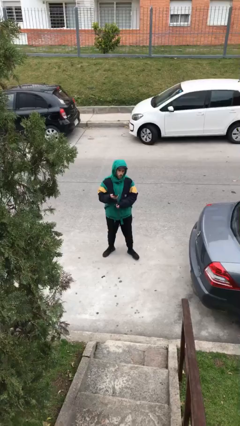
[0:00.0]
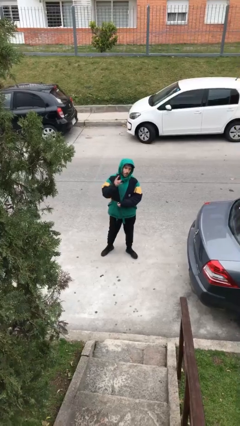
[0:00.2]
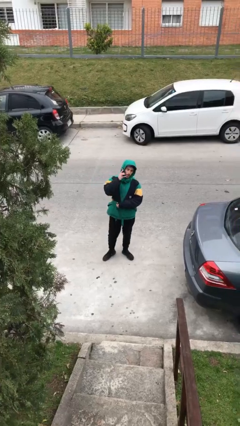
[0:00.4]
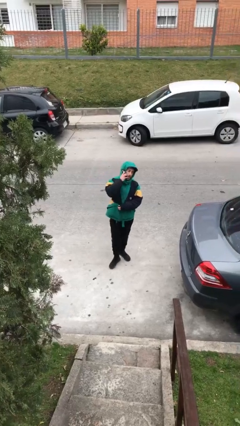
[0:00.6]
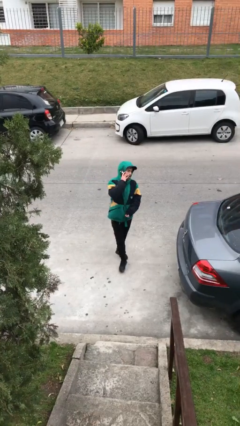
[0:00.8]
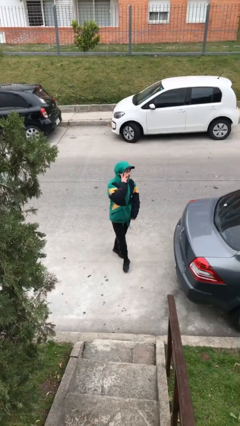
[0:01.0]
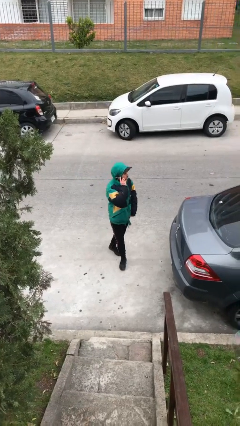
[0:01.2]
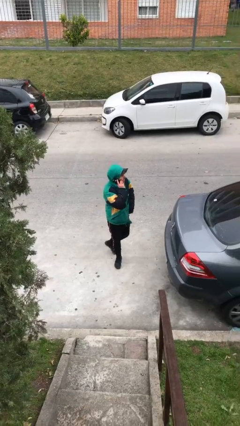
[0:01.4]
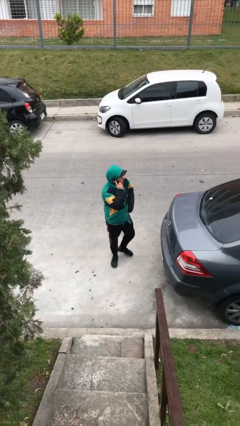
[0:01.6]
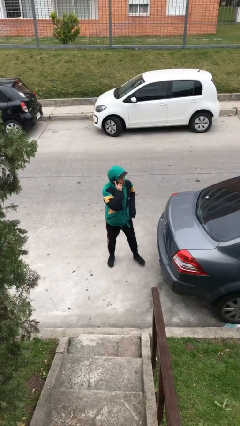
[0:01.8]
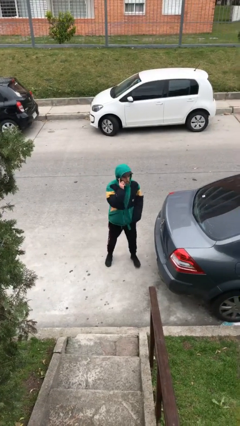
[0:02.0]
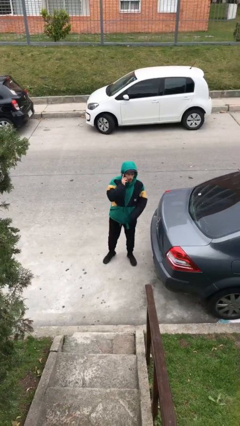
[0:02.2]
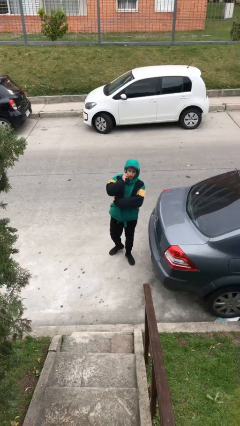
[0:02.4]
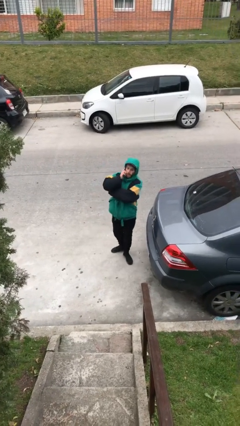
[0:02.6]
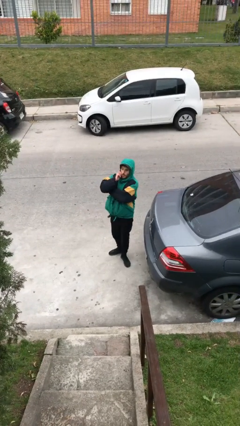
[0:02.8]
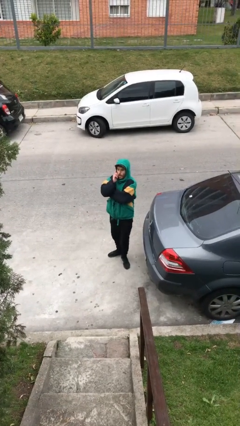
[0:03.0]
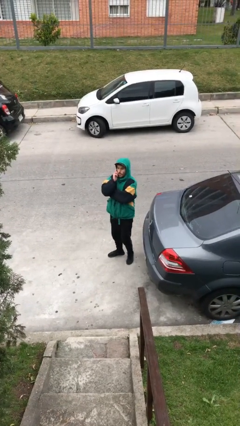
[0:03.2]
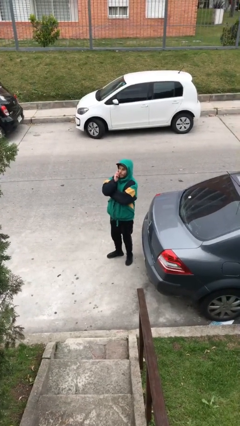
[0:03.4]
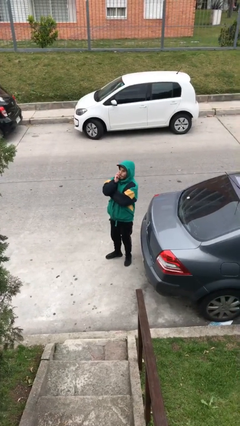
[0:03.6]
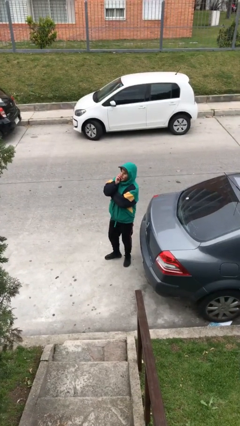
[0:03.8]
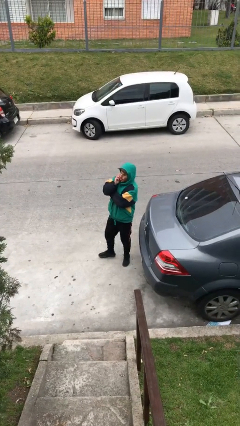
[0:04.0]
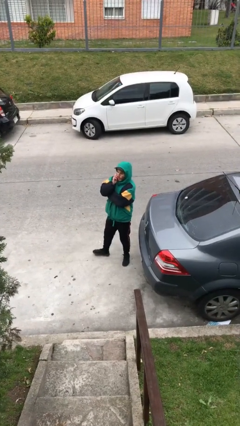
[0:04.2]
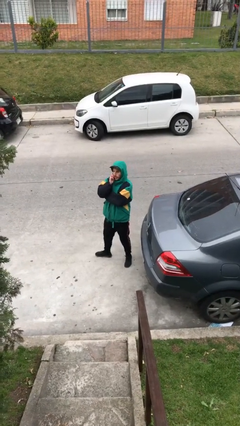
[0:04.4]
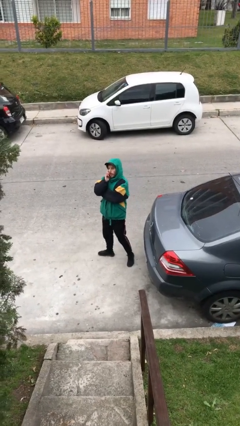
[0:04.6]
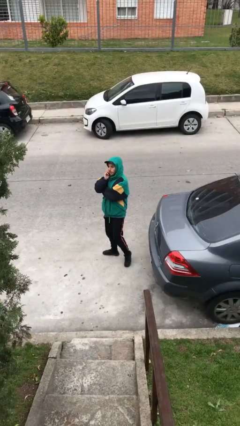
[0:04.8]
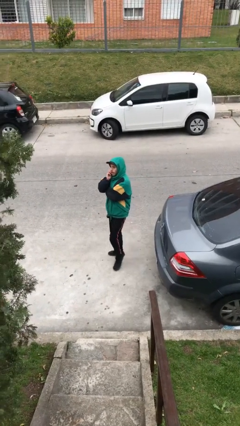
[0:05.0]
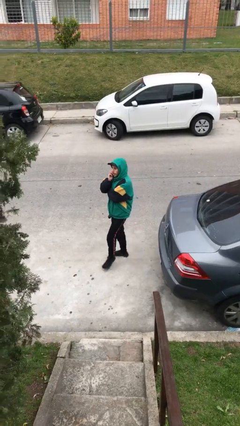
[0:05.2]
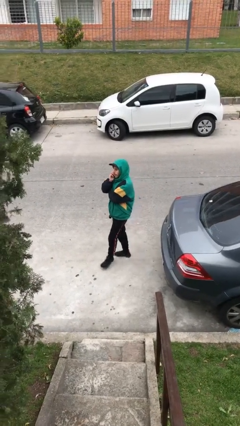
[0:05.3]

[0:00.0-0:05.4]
person talks on phone

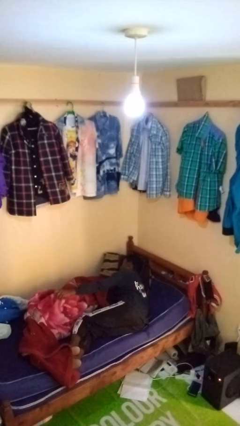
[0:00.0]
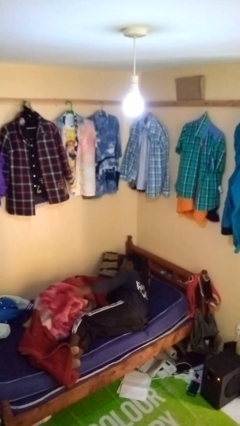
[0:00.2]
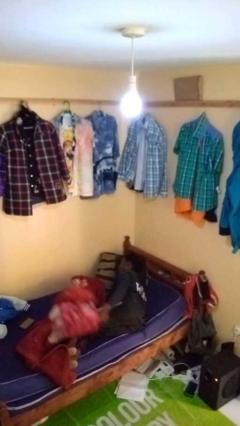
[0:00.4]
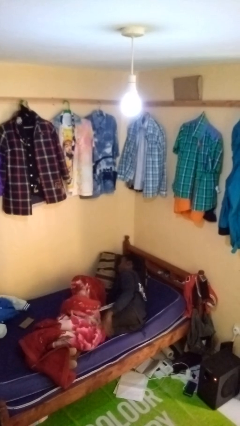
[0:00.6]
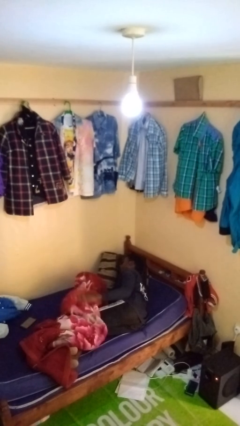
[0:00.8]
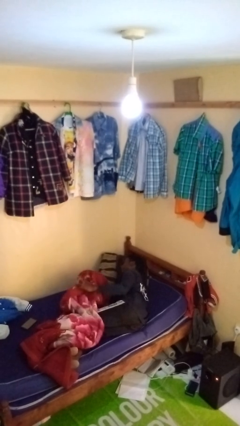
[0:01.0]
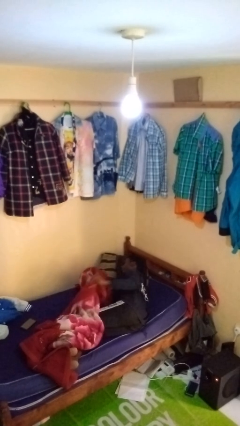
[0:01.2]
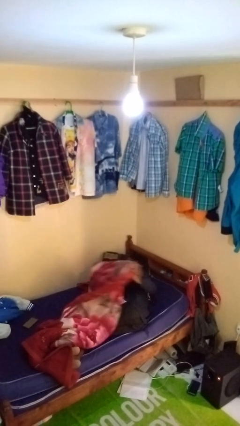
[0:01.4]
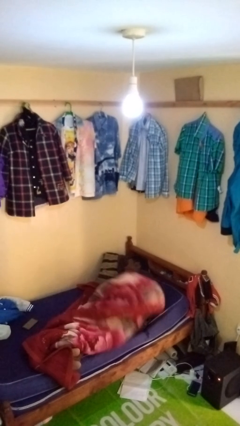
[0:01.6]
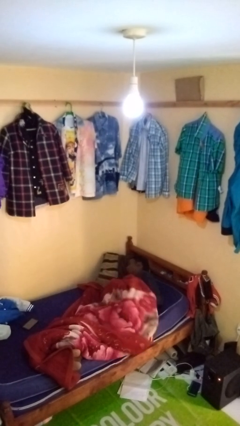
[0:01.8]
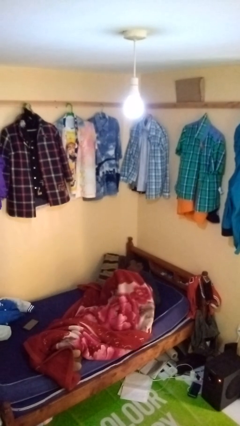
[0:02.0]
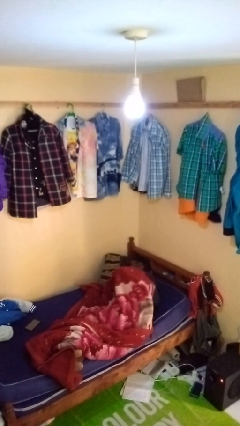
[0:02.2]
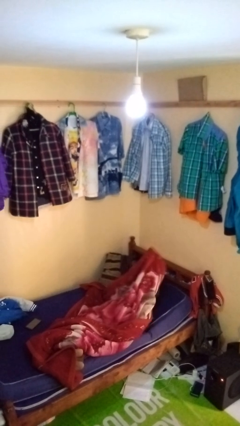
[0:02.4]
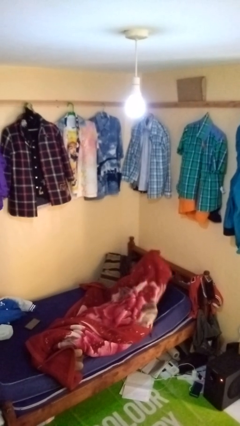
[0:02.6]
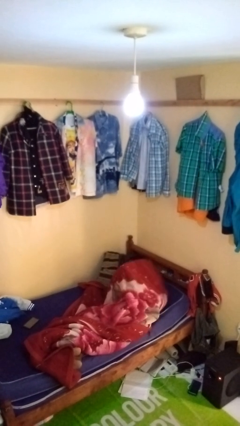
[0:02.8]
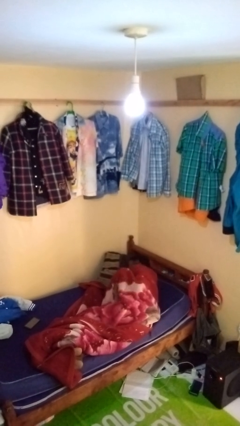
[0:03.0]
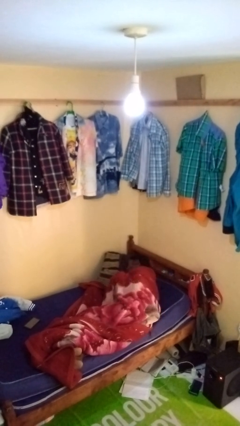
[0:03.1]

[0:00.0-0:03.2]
person covers with blanket

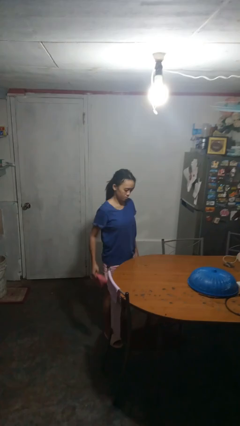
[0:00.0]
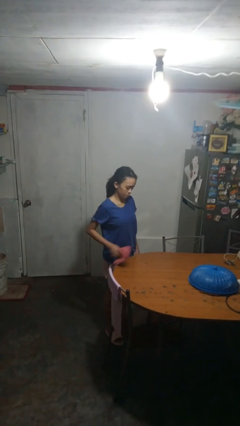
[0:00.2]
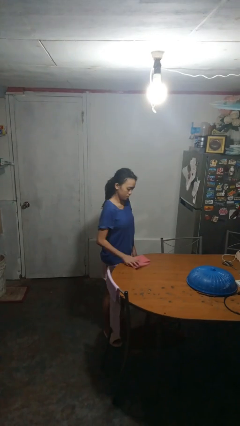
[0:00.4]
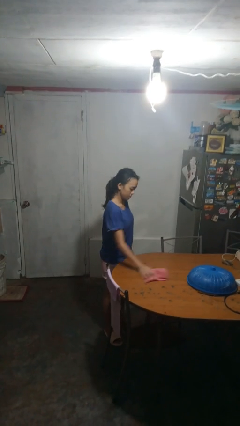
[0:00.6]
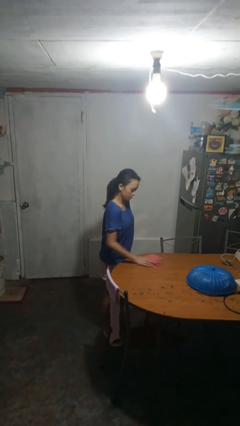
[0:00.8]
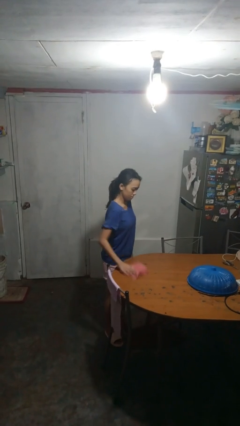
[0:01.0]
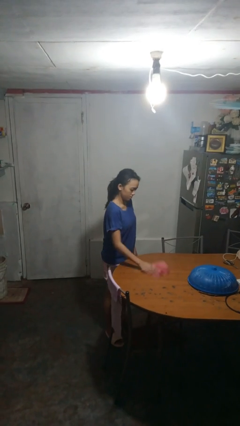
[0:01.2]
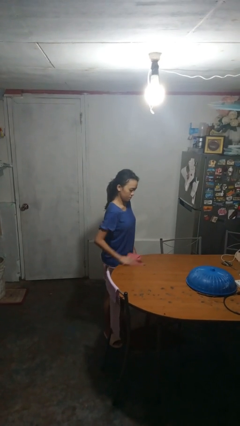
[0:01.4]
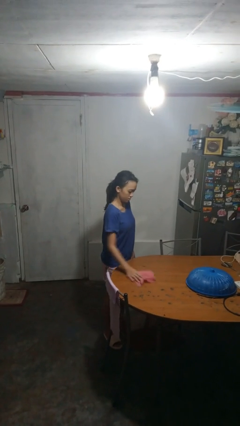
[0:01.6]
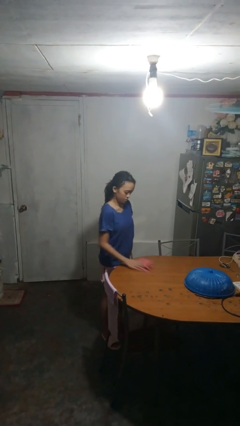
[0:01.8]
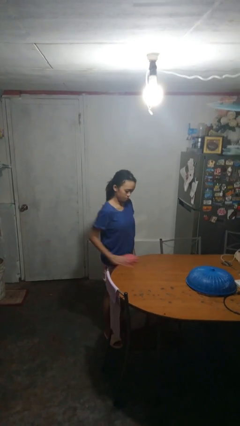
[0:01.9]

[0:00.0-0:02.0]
person cleans table with rag

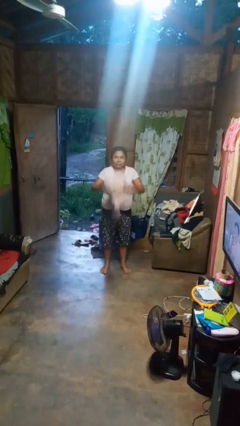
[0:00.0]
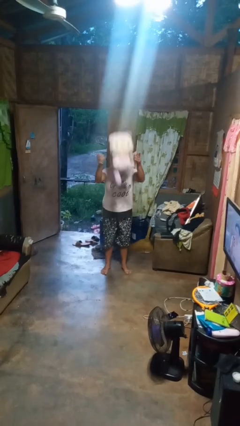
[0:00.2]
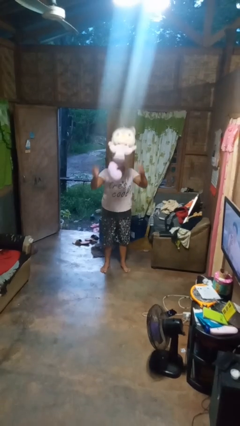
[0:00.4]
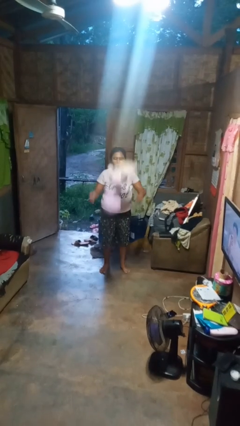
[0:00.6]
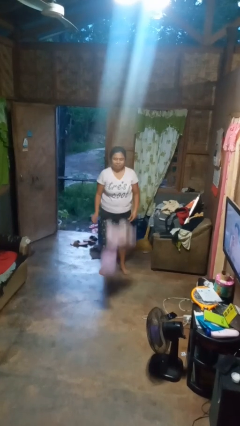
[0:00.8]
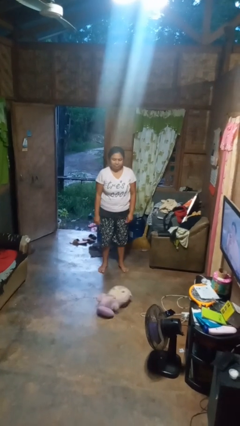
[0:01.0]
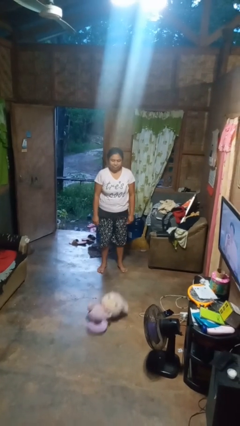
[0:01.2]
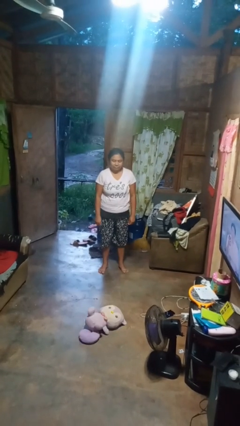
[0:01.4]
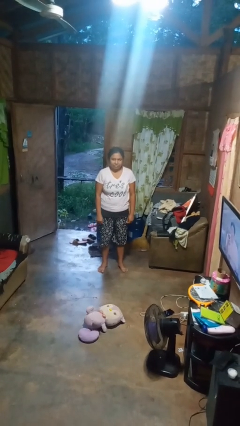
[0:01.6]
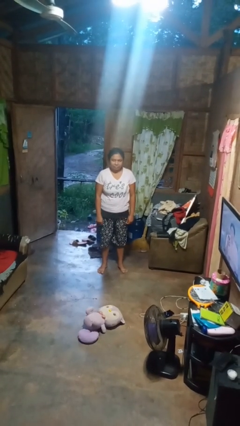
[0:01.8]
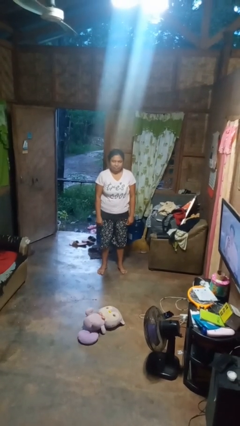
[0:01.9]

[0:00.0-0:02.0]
person throws object into air

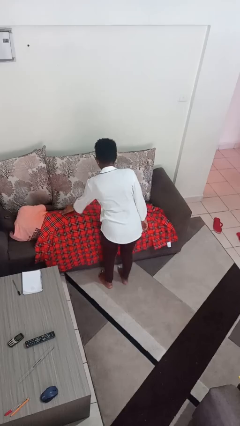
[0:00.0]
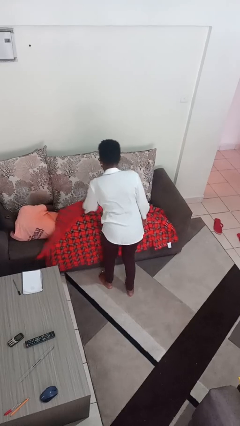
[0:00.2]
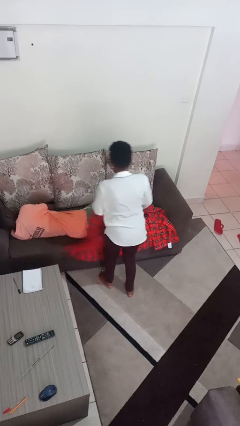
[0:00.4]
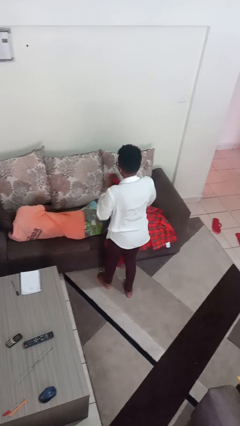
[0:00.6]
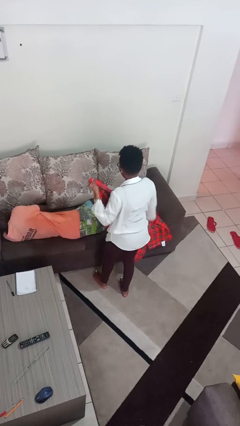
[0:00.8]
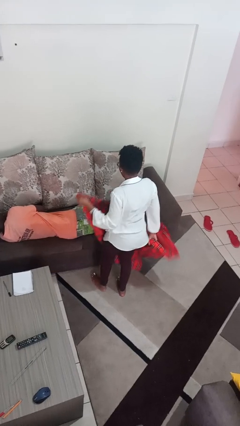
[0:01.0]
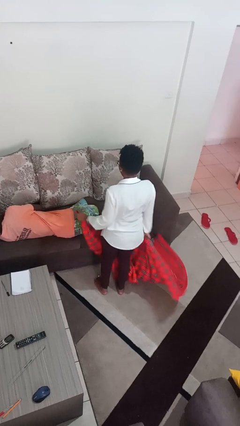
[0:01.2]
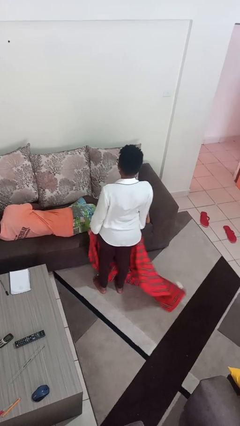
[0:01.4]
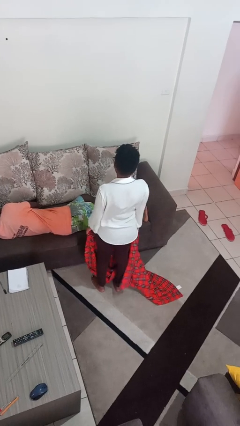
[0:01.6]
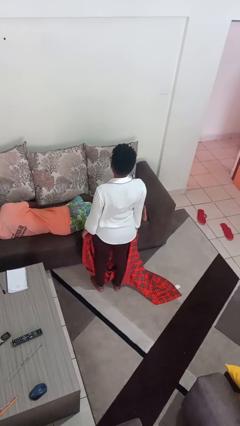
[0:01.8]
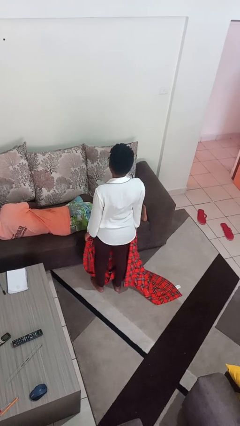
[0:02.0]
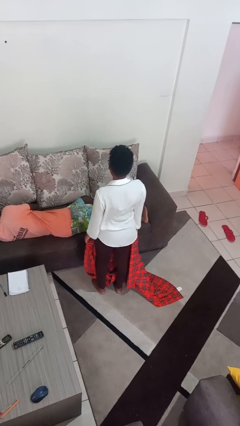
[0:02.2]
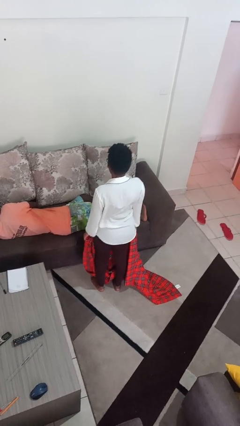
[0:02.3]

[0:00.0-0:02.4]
person uncovers friend with blanket

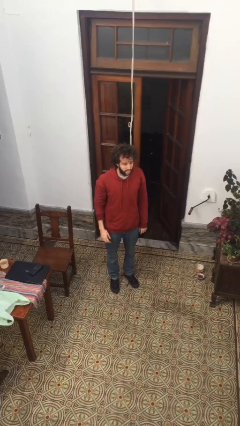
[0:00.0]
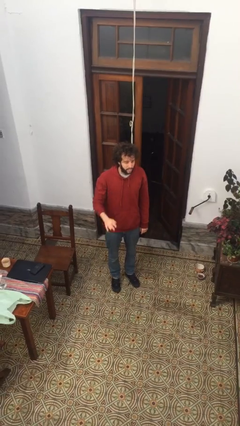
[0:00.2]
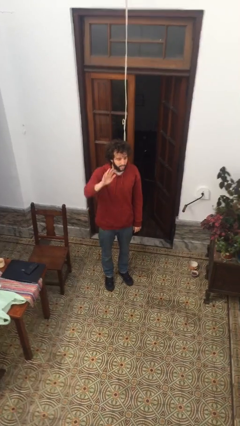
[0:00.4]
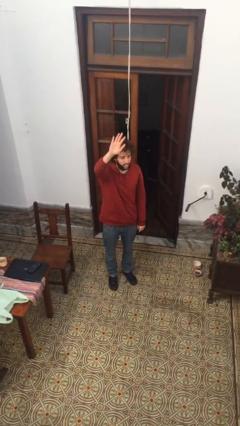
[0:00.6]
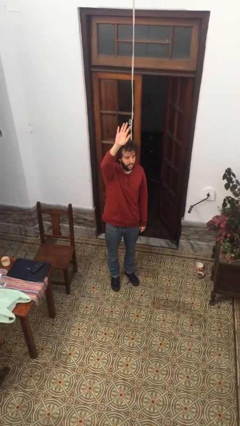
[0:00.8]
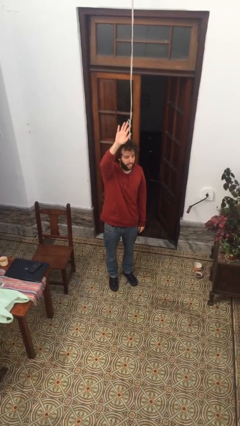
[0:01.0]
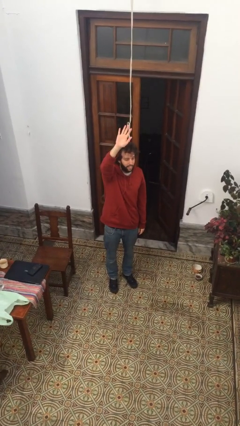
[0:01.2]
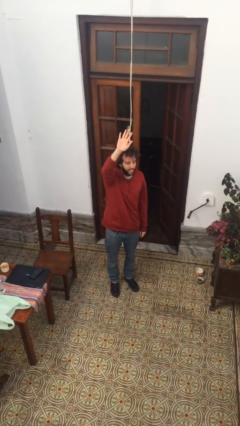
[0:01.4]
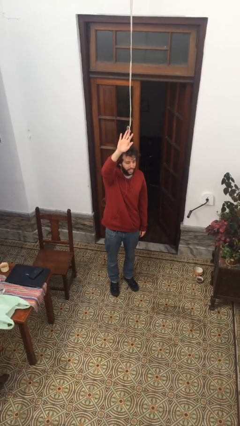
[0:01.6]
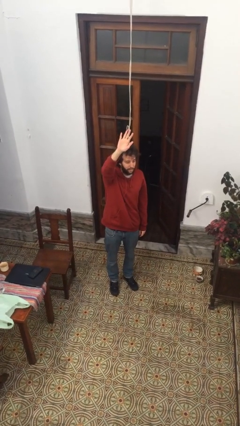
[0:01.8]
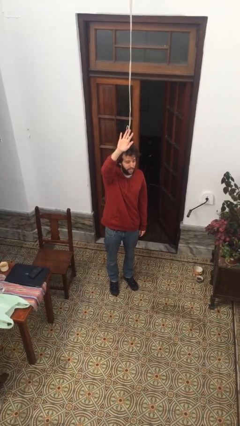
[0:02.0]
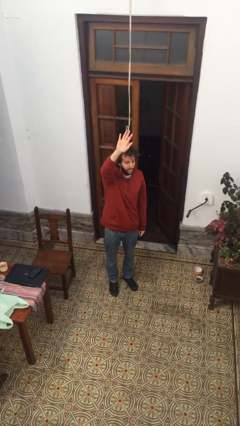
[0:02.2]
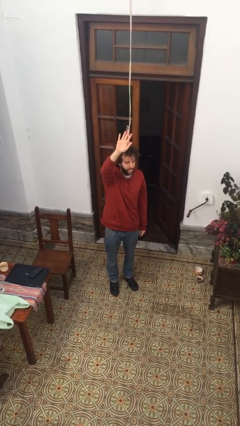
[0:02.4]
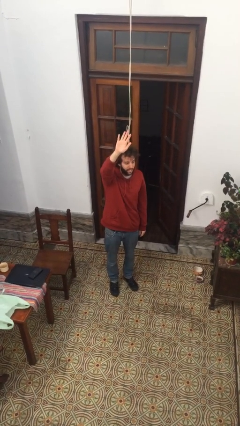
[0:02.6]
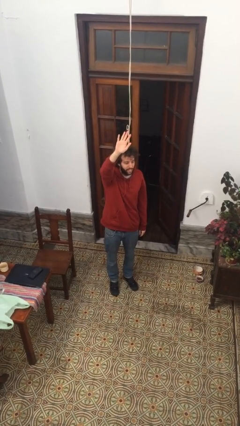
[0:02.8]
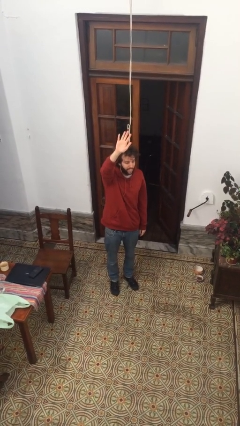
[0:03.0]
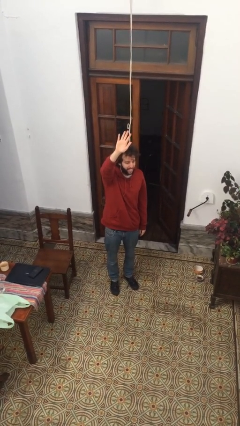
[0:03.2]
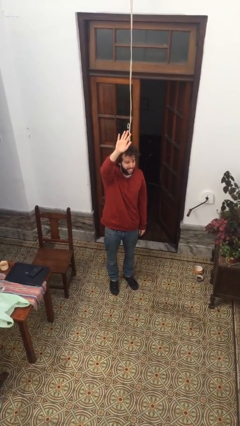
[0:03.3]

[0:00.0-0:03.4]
person gestures raise hand
